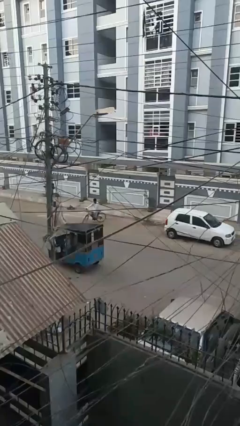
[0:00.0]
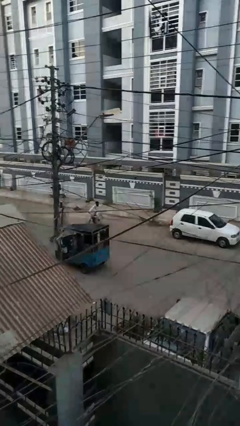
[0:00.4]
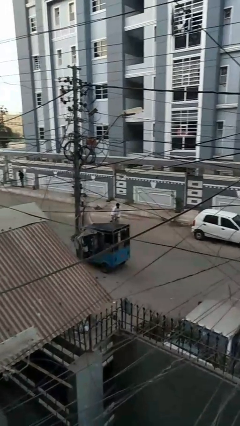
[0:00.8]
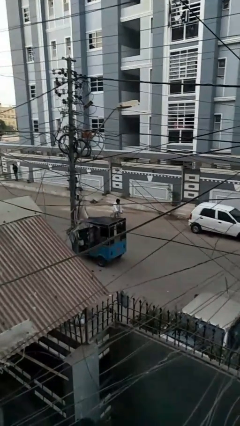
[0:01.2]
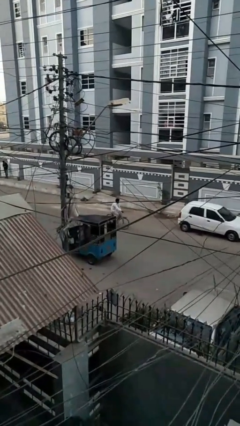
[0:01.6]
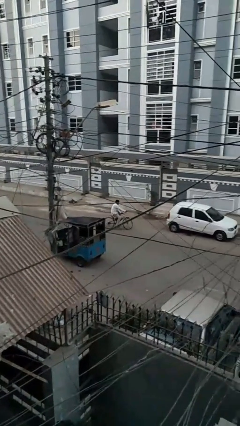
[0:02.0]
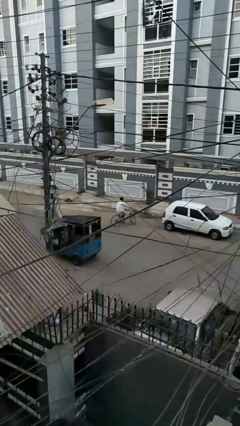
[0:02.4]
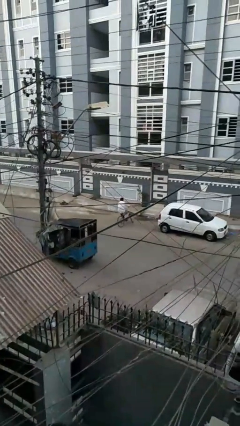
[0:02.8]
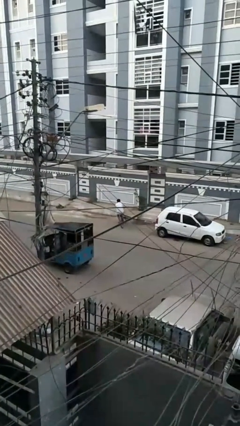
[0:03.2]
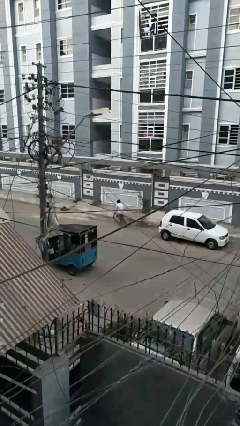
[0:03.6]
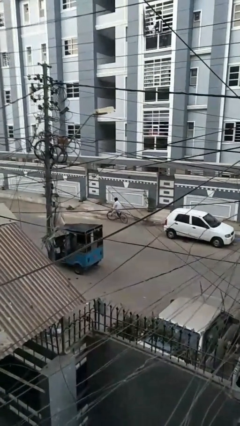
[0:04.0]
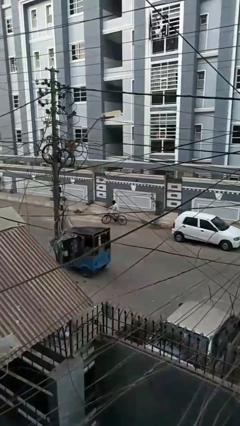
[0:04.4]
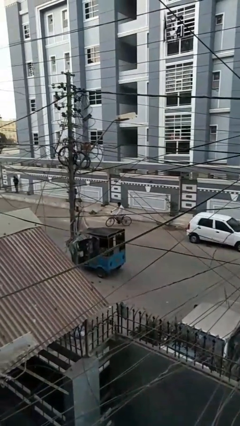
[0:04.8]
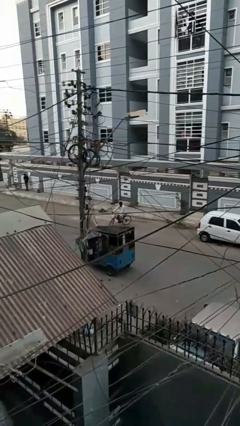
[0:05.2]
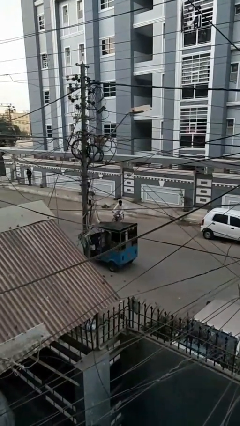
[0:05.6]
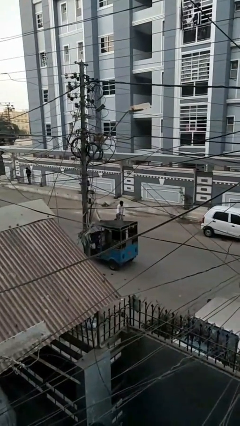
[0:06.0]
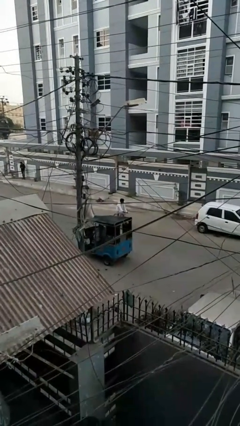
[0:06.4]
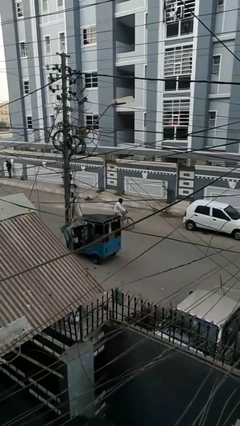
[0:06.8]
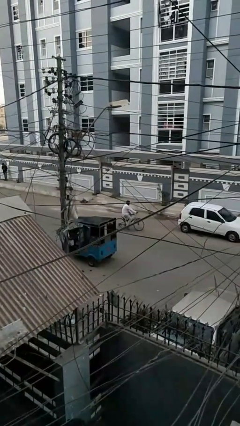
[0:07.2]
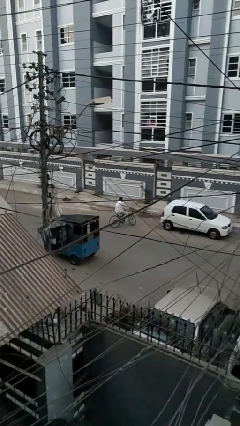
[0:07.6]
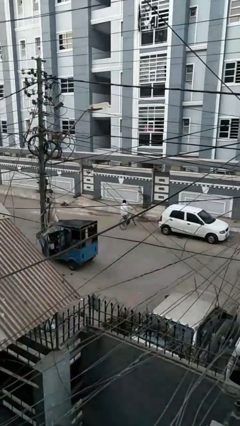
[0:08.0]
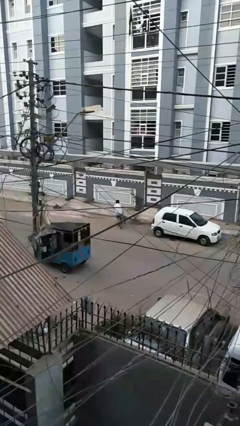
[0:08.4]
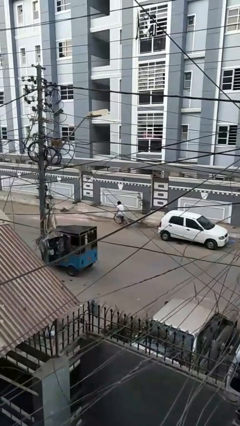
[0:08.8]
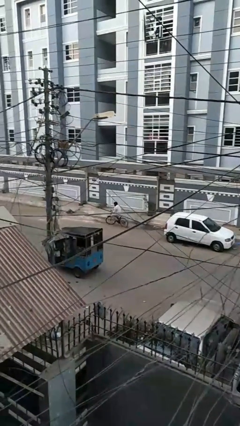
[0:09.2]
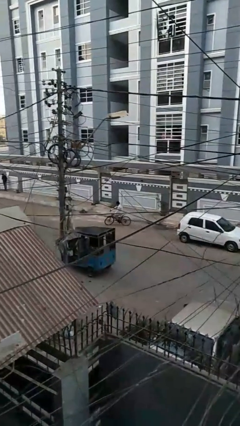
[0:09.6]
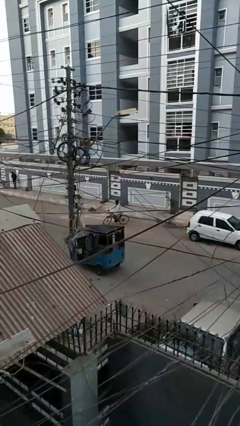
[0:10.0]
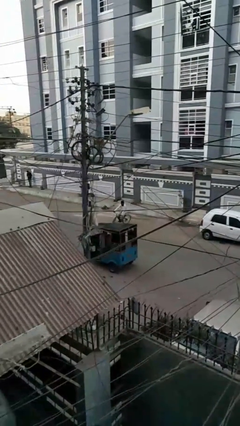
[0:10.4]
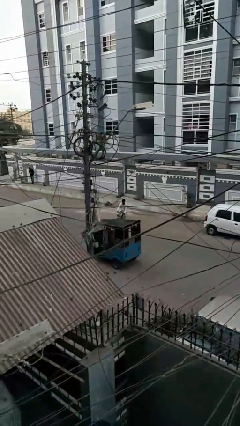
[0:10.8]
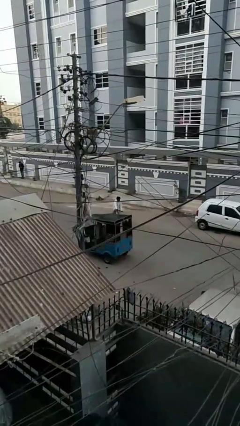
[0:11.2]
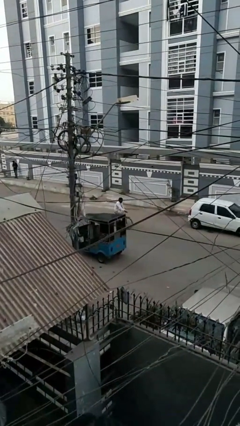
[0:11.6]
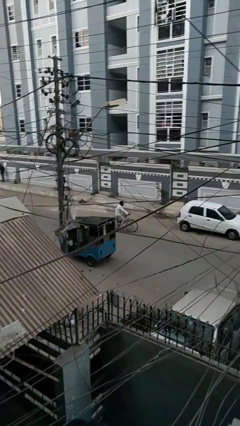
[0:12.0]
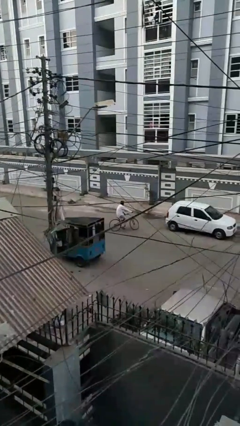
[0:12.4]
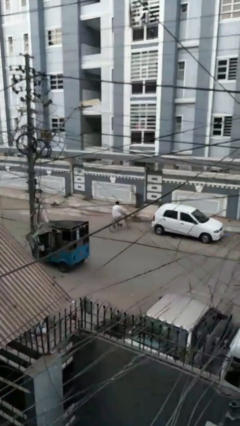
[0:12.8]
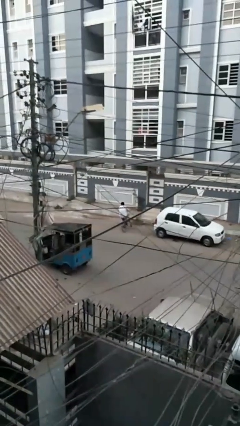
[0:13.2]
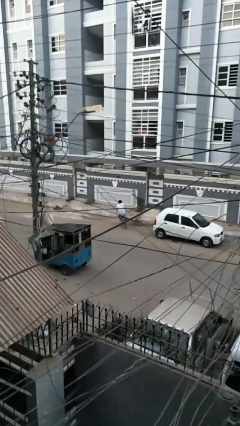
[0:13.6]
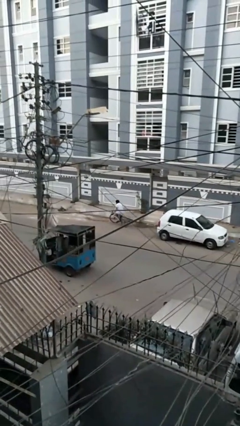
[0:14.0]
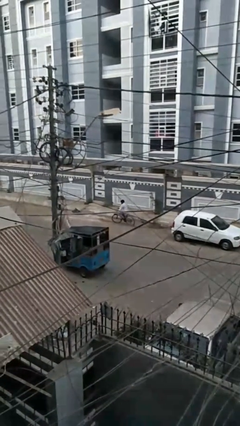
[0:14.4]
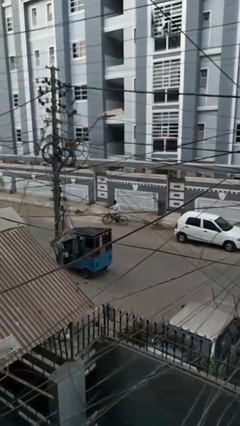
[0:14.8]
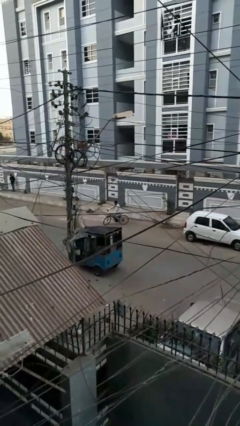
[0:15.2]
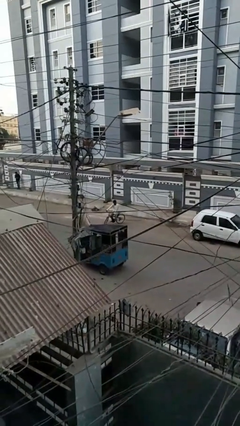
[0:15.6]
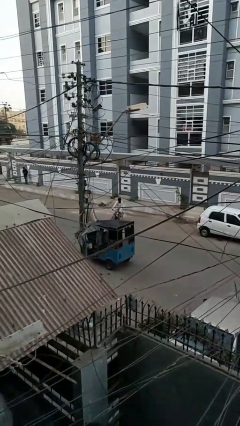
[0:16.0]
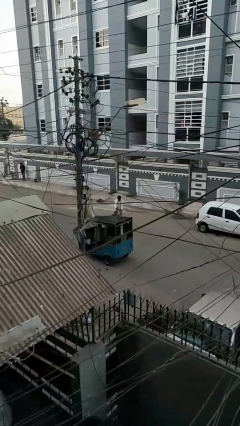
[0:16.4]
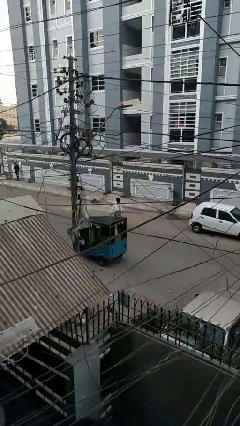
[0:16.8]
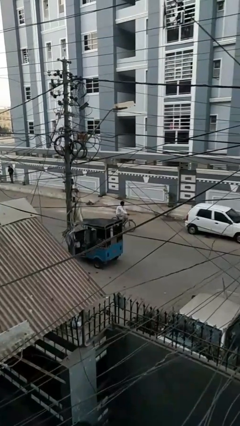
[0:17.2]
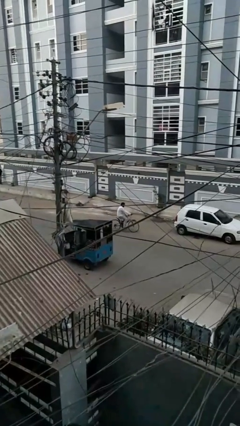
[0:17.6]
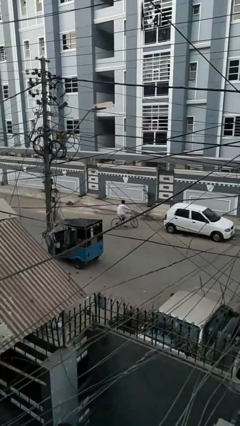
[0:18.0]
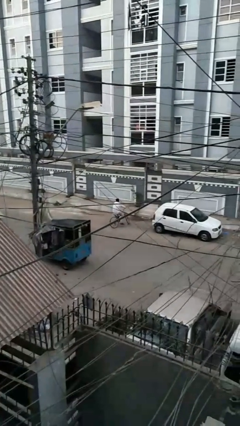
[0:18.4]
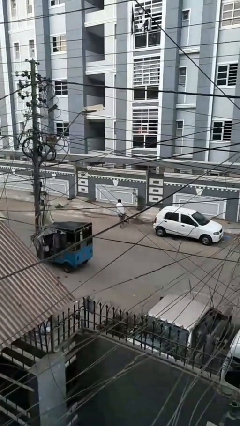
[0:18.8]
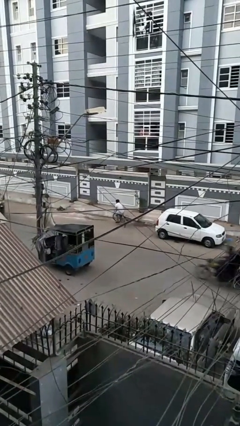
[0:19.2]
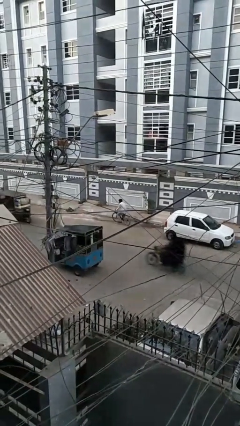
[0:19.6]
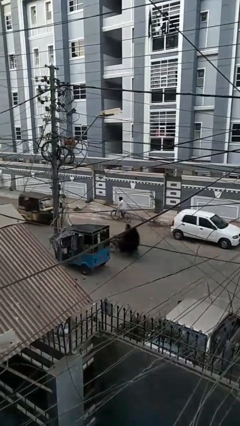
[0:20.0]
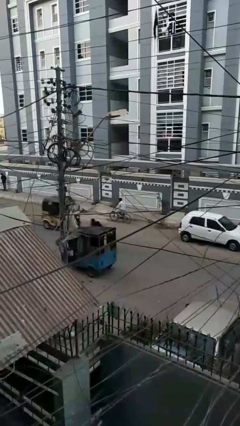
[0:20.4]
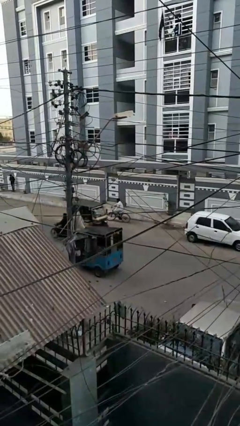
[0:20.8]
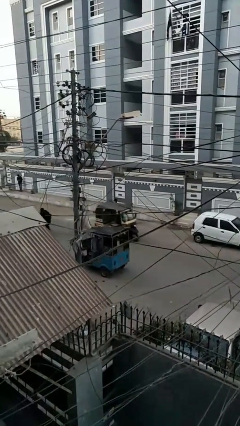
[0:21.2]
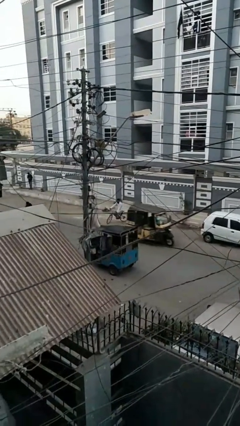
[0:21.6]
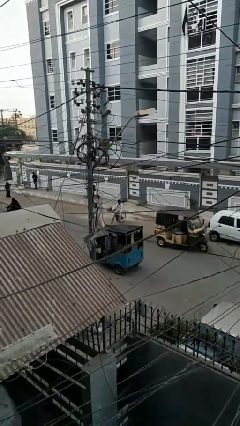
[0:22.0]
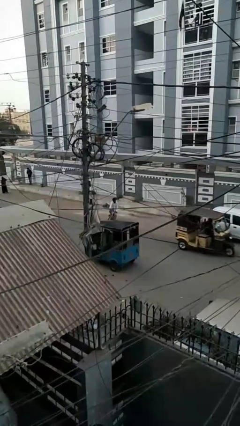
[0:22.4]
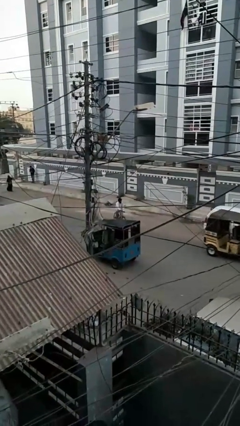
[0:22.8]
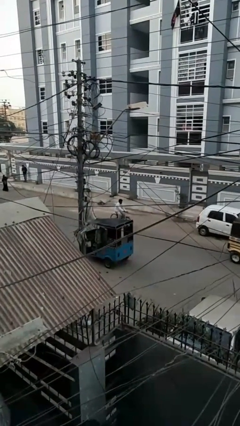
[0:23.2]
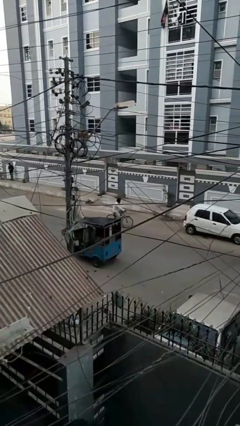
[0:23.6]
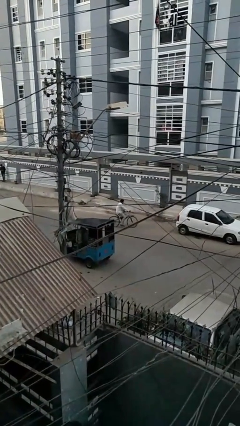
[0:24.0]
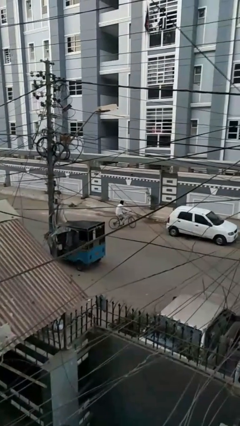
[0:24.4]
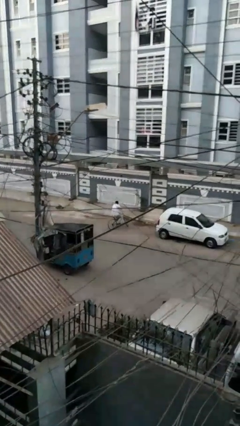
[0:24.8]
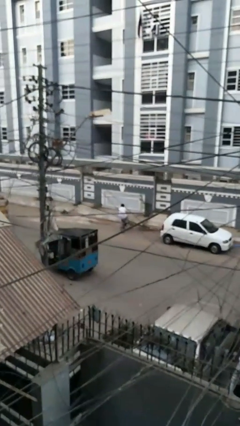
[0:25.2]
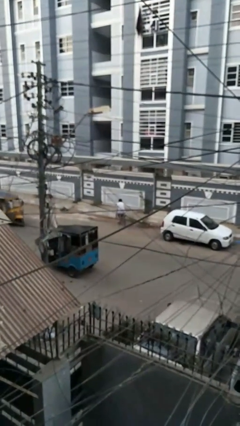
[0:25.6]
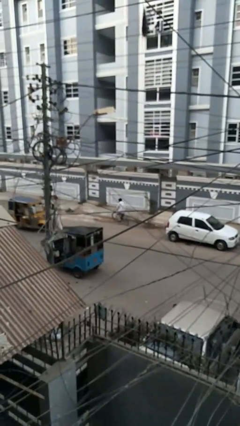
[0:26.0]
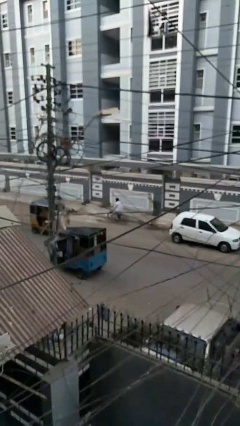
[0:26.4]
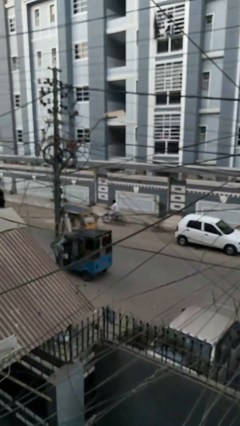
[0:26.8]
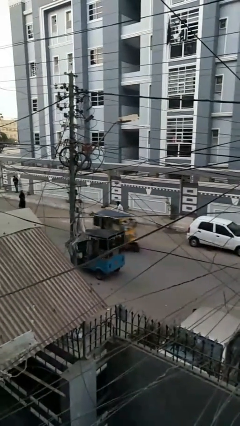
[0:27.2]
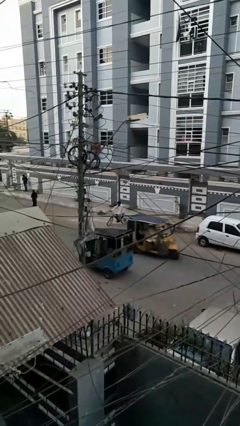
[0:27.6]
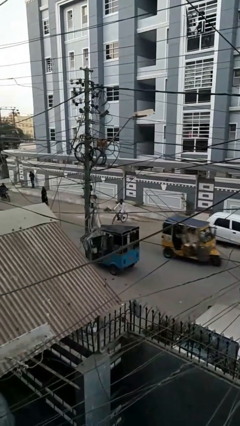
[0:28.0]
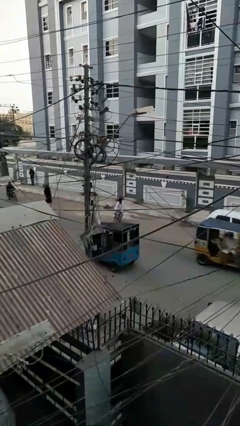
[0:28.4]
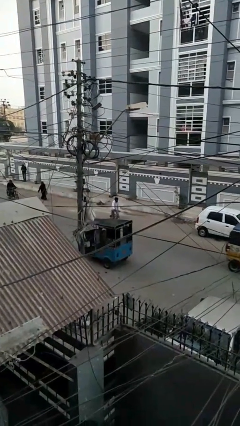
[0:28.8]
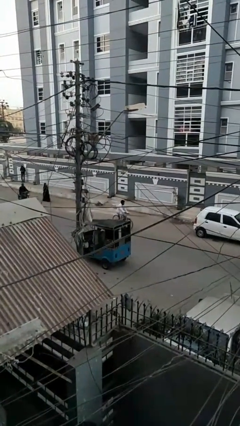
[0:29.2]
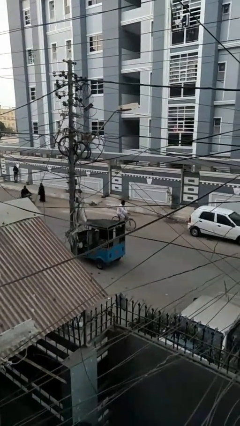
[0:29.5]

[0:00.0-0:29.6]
person rides bicycle

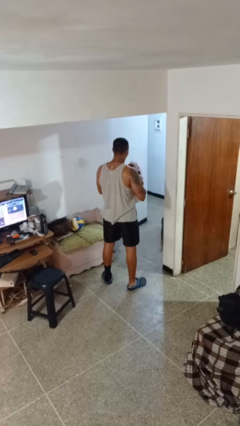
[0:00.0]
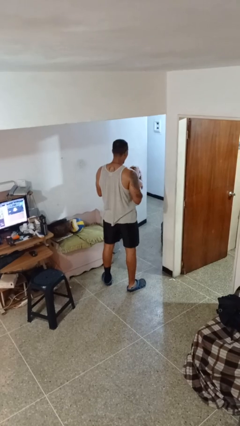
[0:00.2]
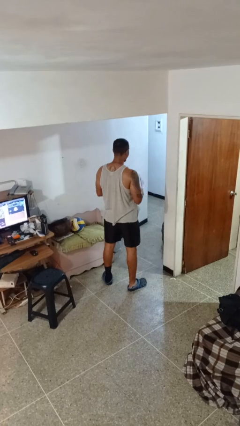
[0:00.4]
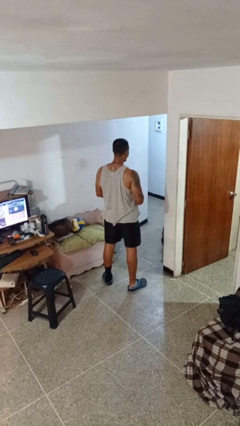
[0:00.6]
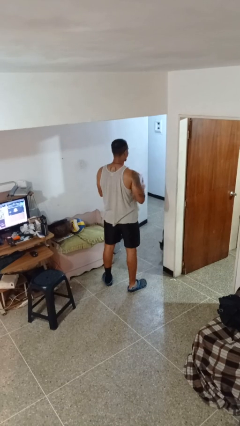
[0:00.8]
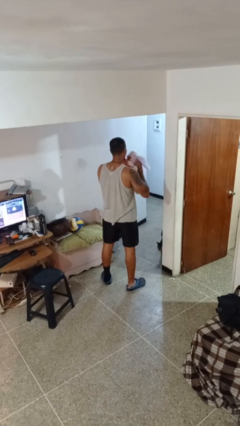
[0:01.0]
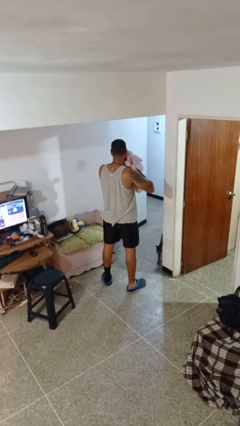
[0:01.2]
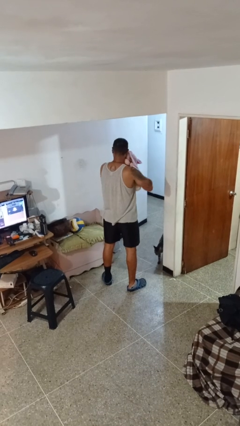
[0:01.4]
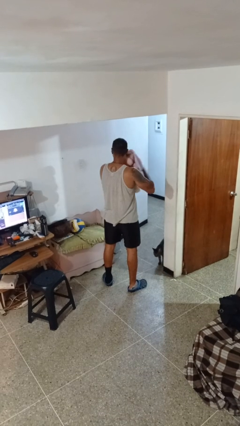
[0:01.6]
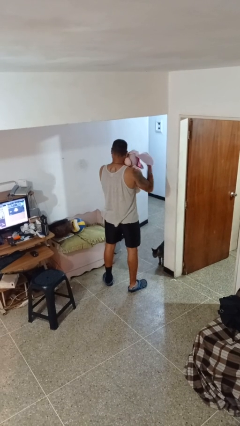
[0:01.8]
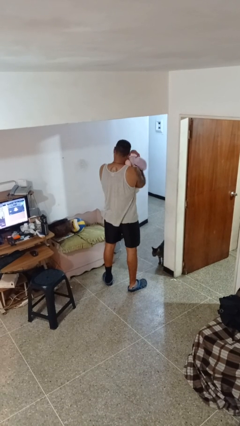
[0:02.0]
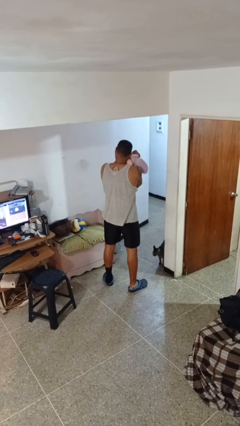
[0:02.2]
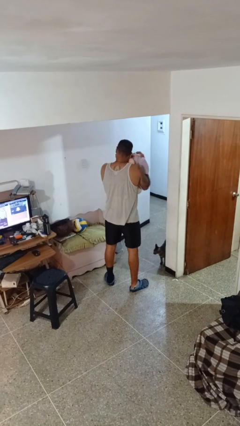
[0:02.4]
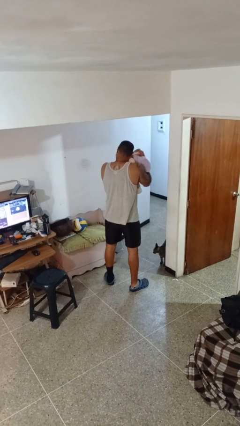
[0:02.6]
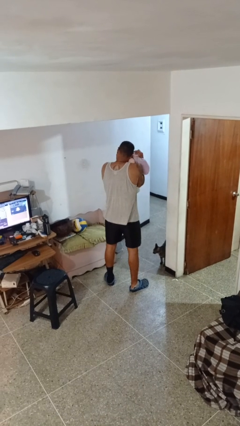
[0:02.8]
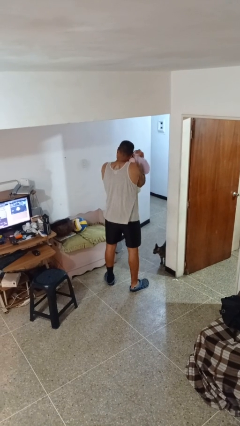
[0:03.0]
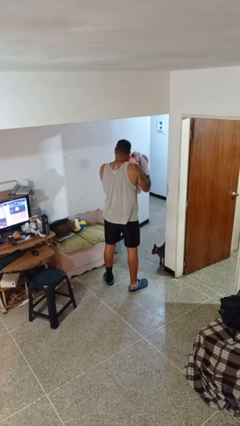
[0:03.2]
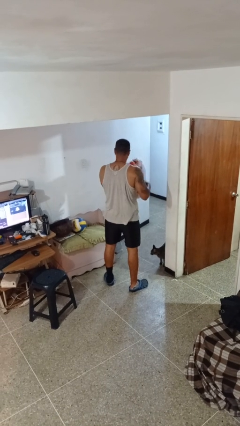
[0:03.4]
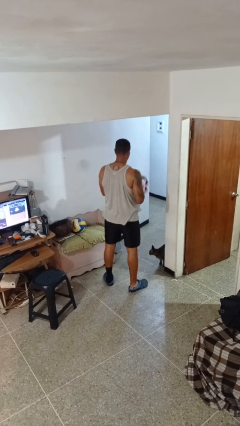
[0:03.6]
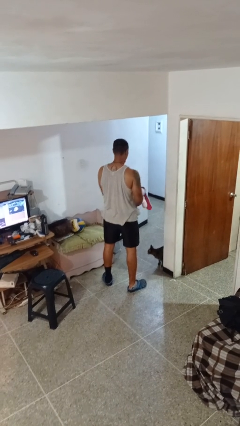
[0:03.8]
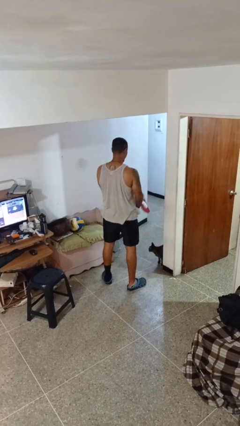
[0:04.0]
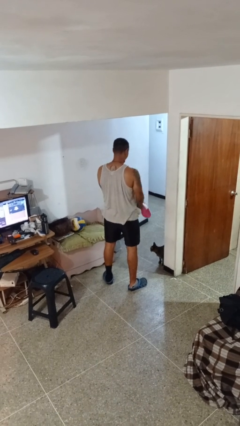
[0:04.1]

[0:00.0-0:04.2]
person squeezes object
